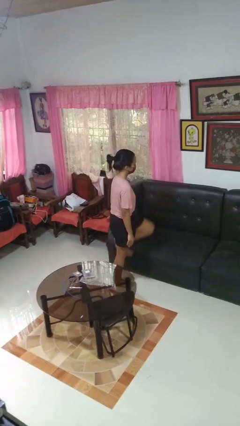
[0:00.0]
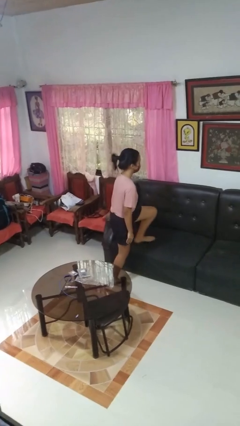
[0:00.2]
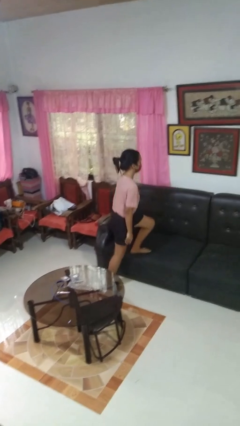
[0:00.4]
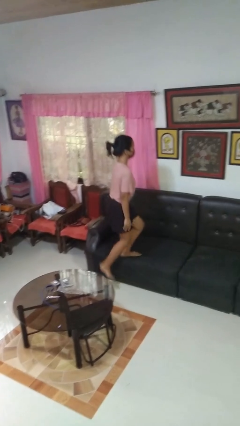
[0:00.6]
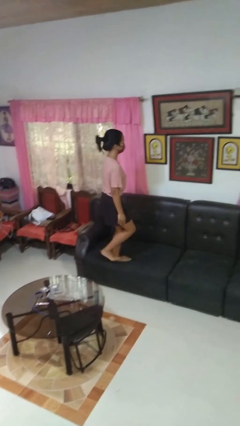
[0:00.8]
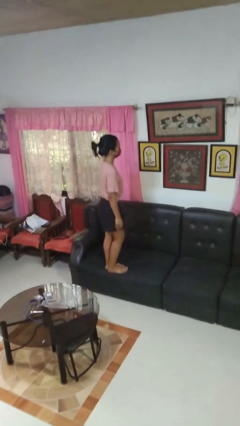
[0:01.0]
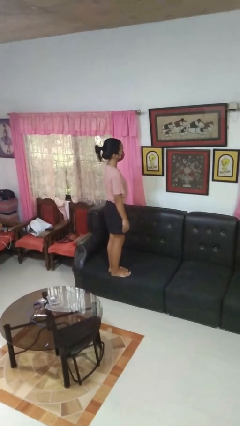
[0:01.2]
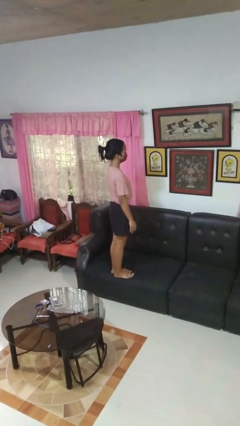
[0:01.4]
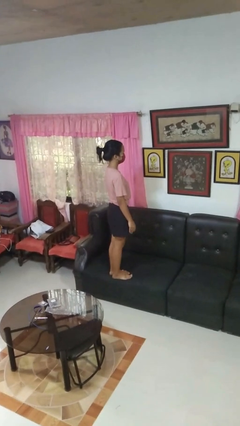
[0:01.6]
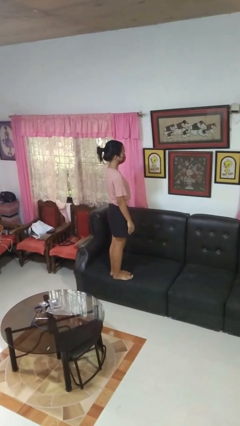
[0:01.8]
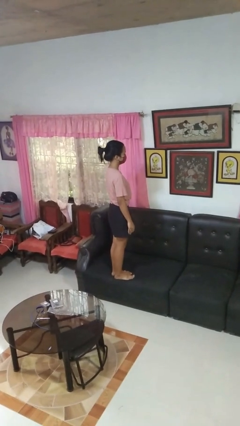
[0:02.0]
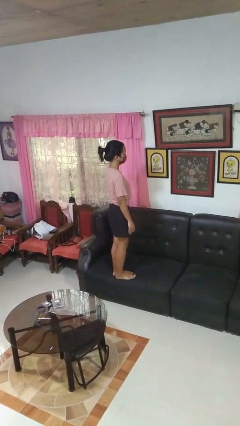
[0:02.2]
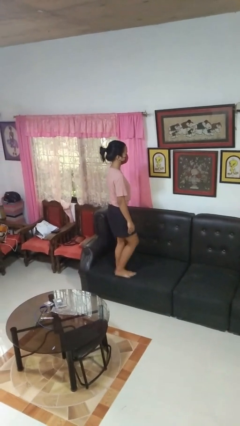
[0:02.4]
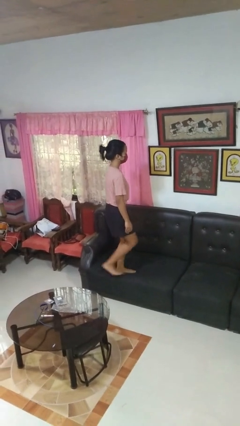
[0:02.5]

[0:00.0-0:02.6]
person climbs on couch

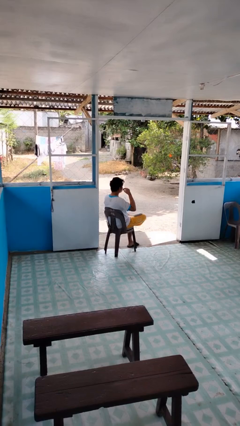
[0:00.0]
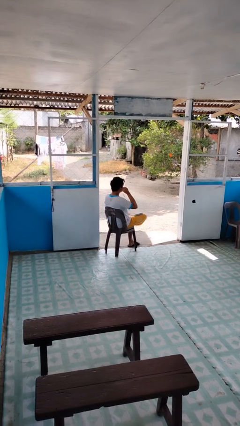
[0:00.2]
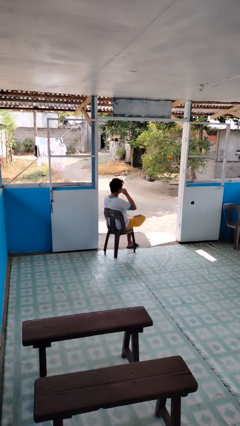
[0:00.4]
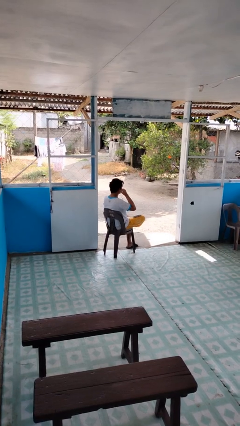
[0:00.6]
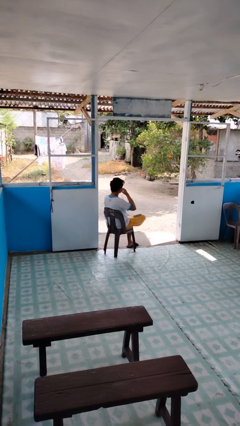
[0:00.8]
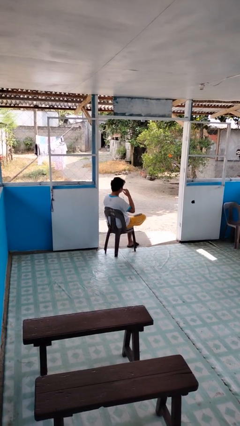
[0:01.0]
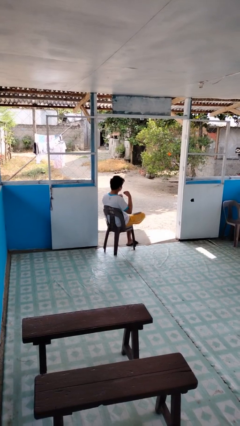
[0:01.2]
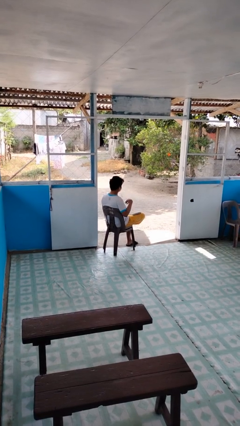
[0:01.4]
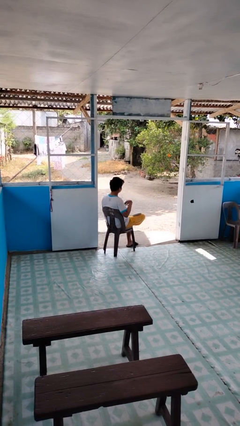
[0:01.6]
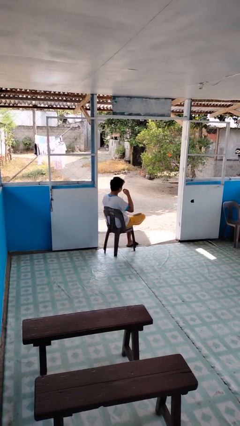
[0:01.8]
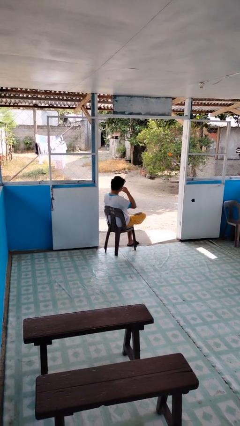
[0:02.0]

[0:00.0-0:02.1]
person puts on headphones

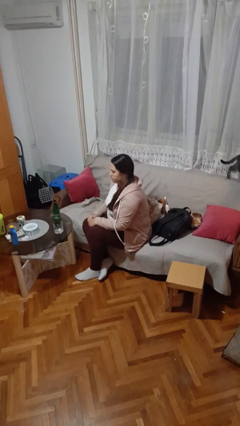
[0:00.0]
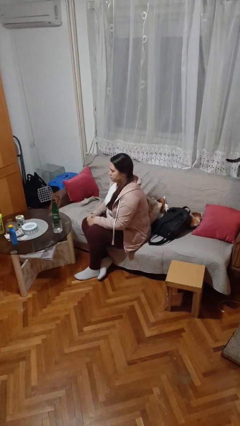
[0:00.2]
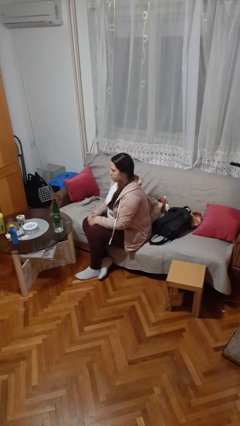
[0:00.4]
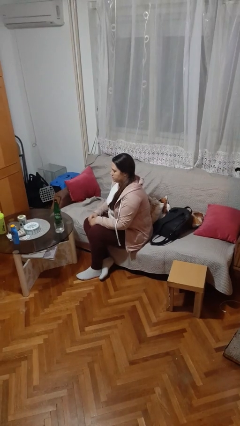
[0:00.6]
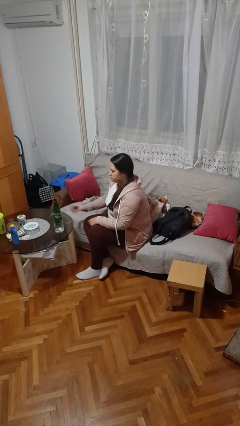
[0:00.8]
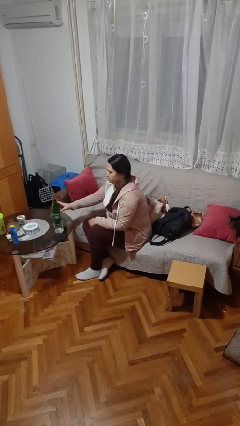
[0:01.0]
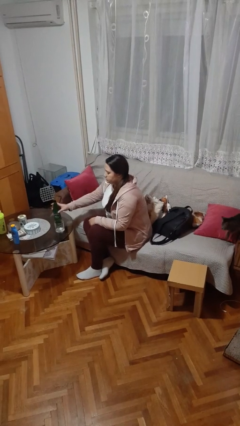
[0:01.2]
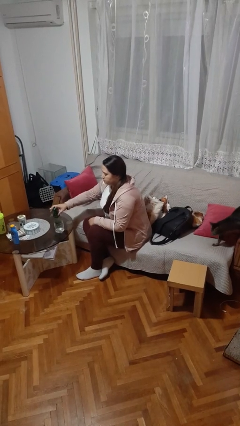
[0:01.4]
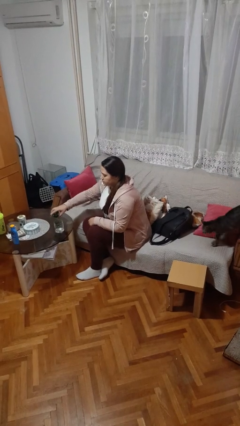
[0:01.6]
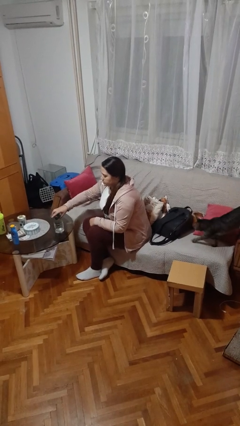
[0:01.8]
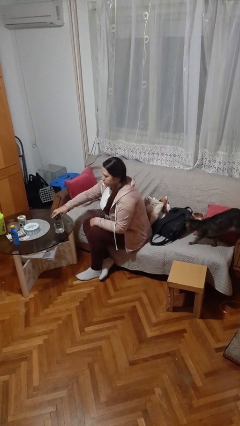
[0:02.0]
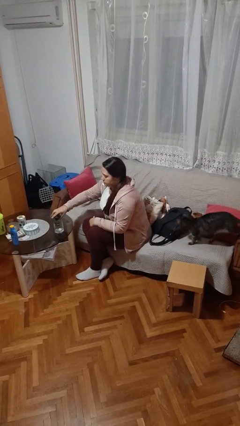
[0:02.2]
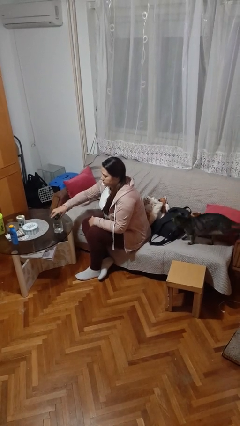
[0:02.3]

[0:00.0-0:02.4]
person pours liquid into cup

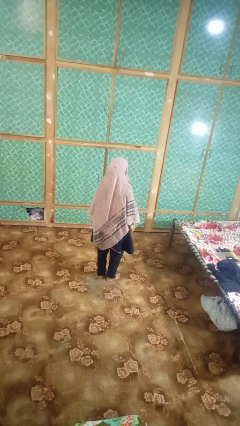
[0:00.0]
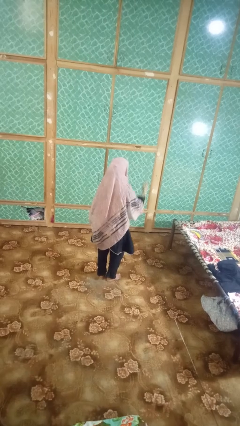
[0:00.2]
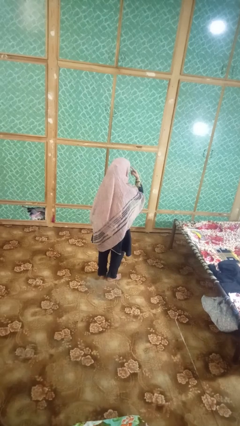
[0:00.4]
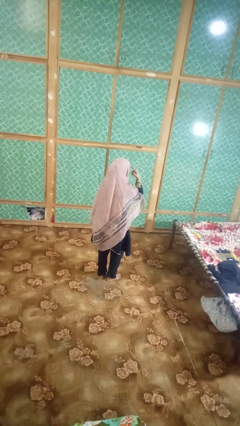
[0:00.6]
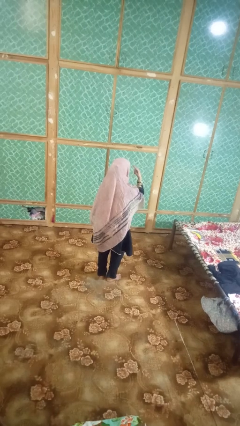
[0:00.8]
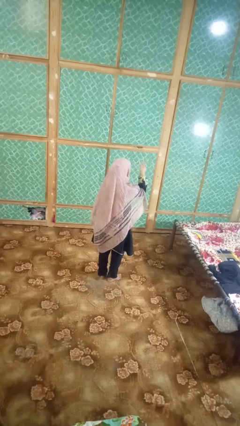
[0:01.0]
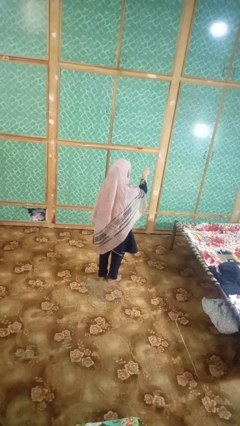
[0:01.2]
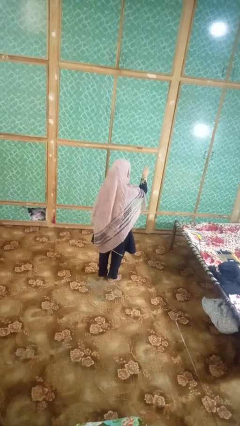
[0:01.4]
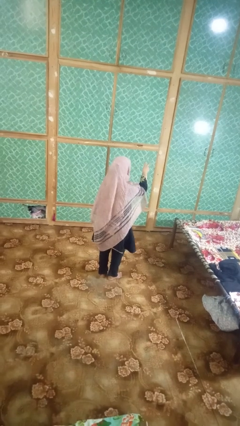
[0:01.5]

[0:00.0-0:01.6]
person gestures behind me

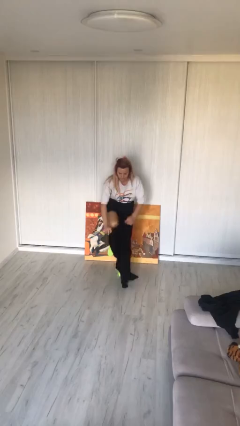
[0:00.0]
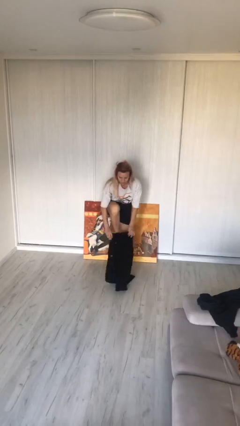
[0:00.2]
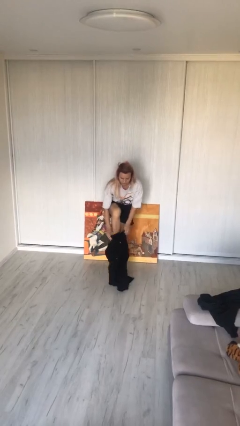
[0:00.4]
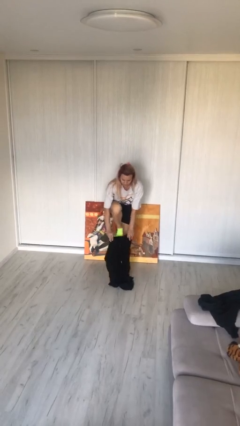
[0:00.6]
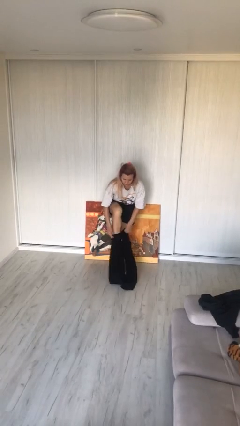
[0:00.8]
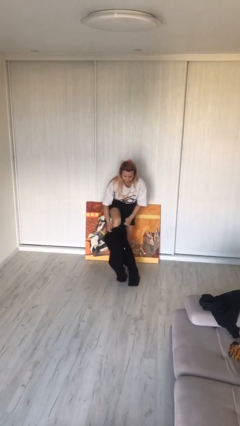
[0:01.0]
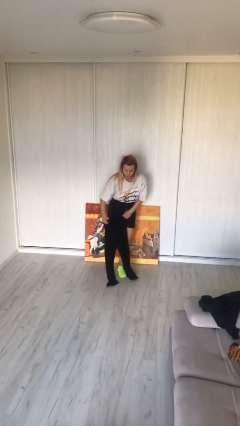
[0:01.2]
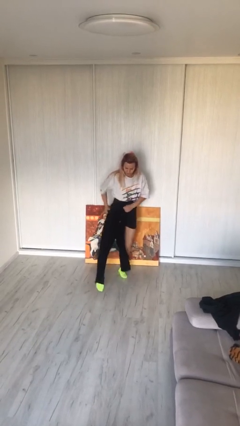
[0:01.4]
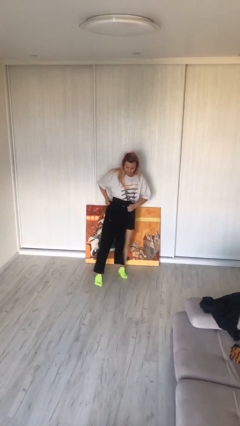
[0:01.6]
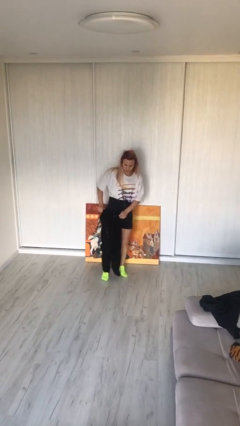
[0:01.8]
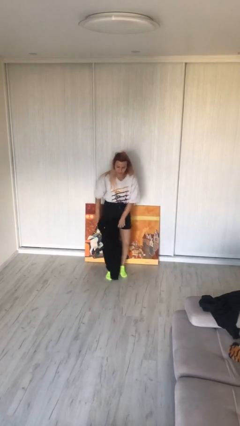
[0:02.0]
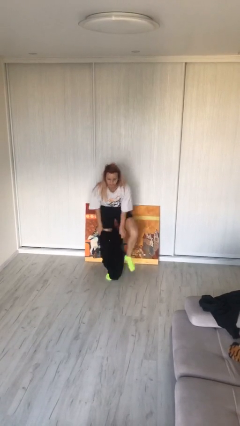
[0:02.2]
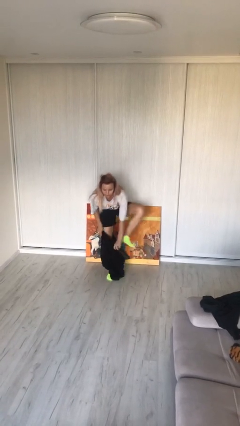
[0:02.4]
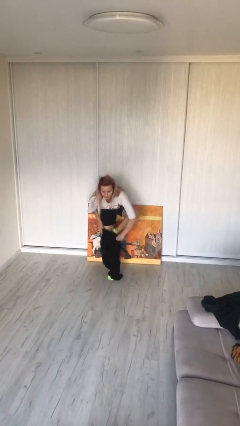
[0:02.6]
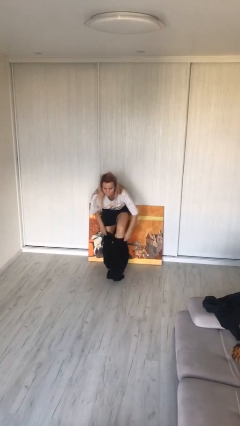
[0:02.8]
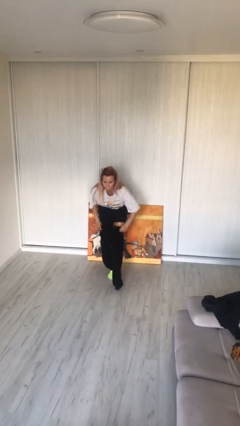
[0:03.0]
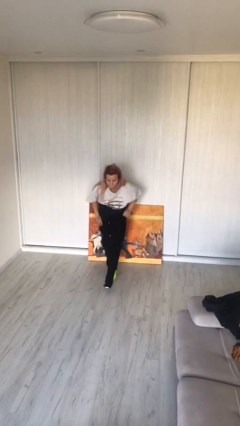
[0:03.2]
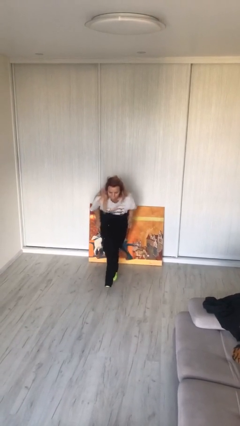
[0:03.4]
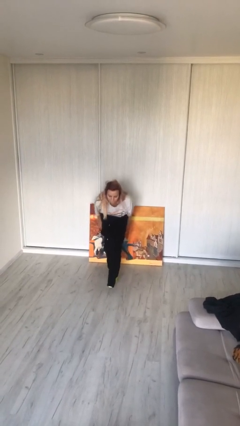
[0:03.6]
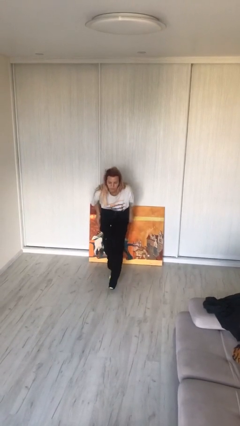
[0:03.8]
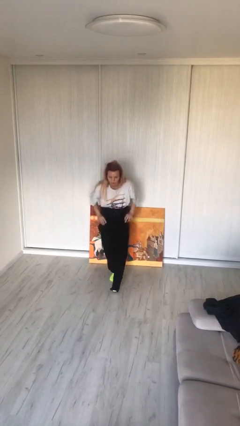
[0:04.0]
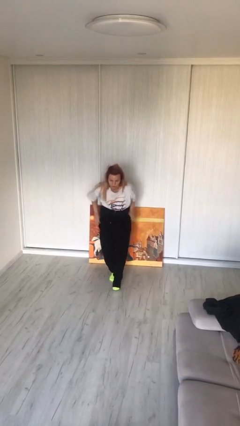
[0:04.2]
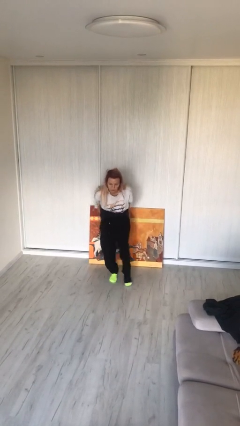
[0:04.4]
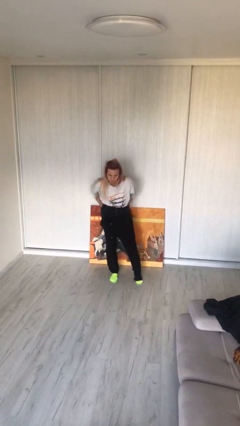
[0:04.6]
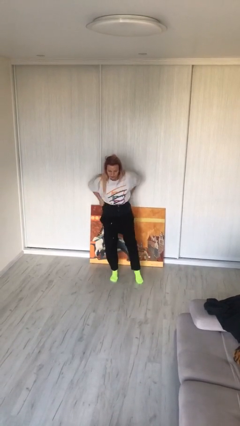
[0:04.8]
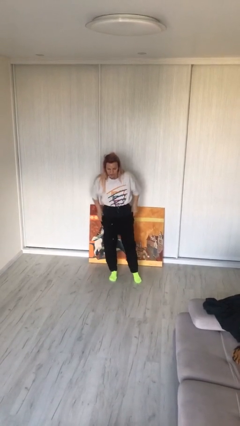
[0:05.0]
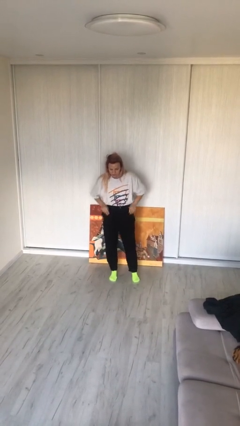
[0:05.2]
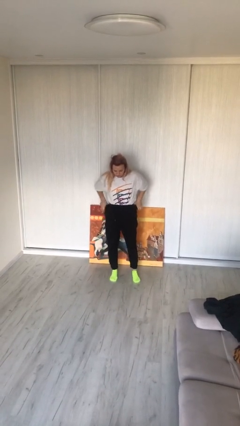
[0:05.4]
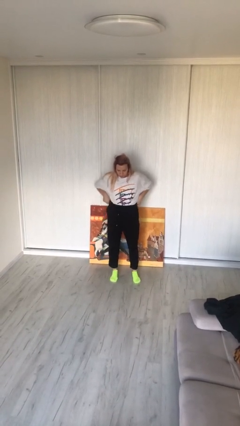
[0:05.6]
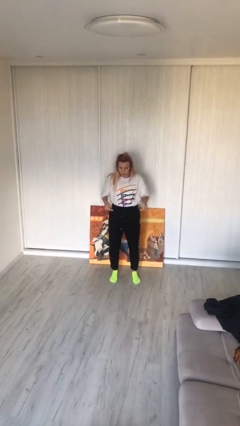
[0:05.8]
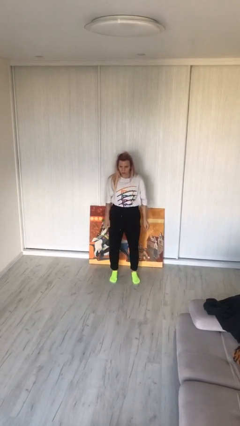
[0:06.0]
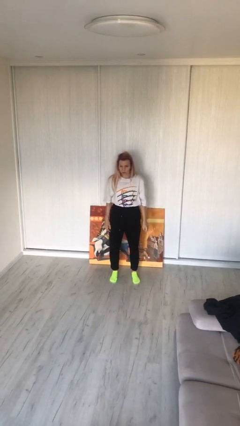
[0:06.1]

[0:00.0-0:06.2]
person puts on pants

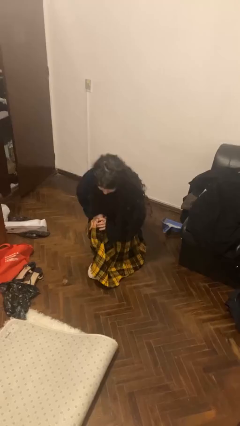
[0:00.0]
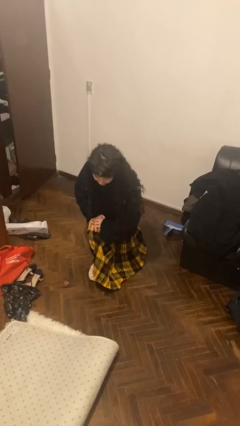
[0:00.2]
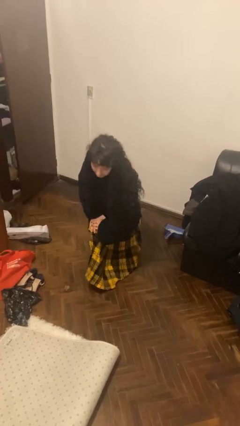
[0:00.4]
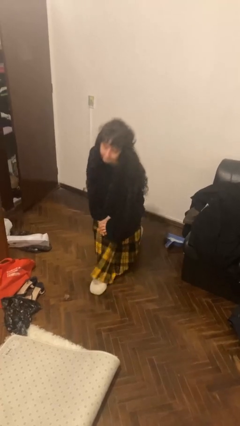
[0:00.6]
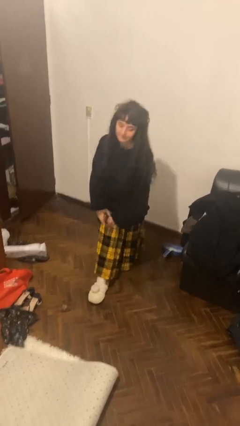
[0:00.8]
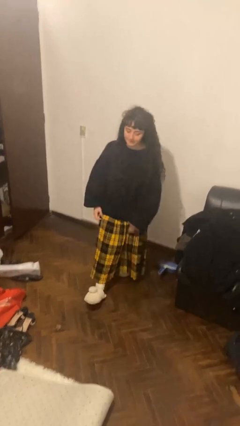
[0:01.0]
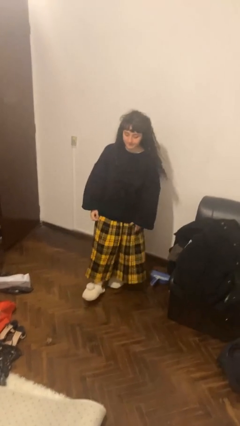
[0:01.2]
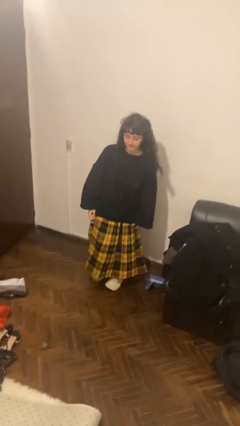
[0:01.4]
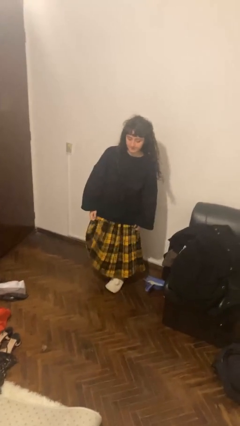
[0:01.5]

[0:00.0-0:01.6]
person stands up from floor

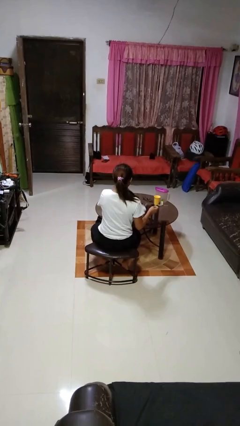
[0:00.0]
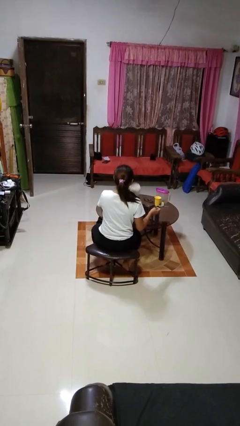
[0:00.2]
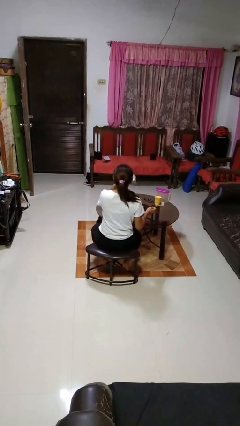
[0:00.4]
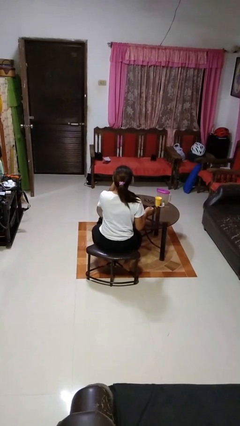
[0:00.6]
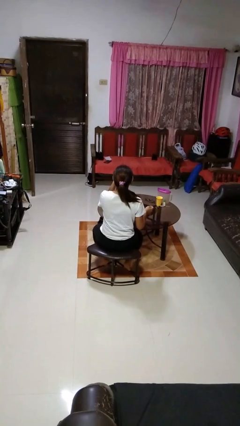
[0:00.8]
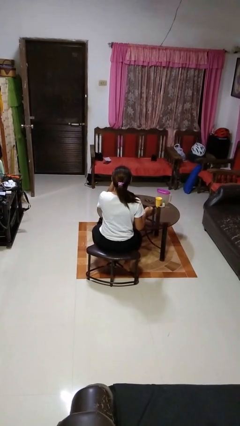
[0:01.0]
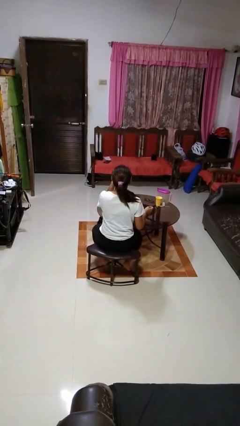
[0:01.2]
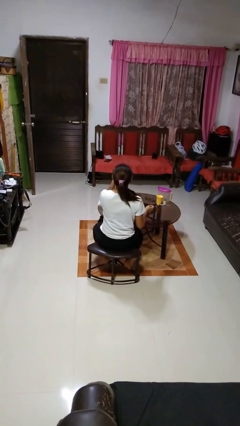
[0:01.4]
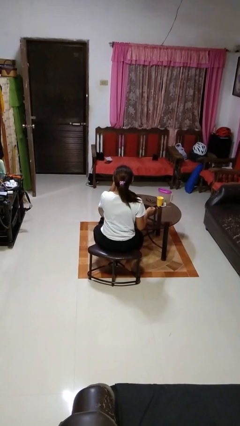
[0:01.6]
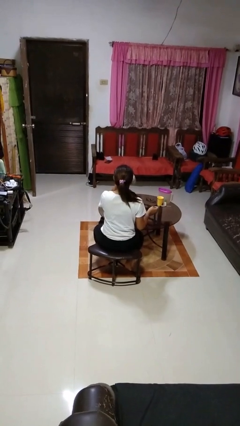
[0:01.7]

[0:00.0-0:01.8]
person drinks from mug
